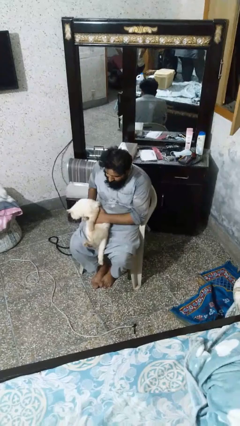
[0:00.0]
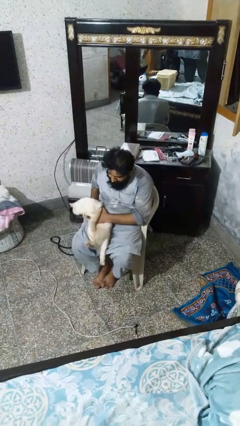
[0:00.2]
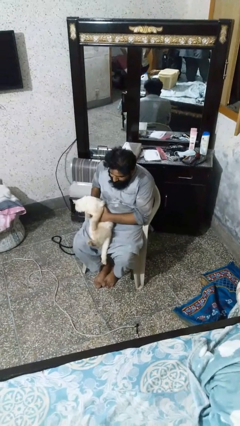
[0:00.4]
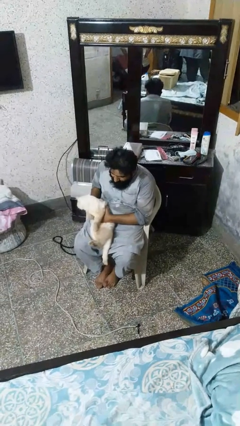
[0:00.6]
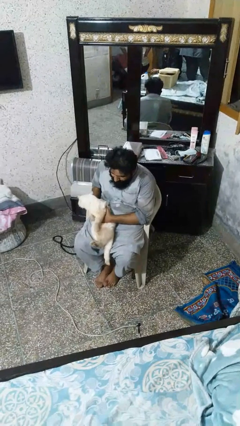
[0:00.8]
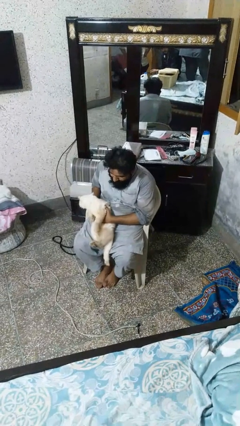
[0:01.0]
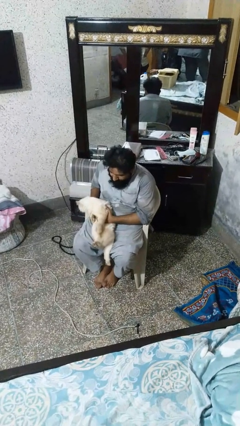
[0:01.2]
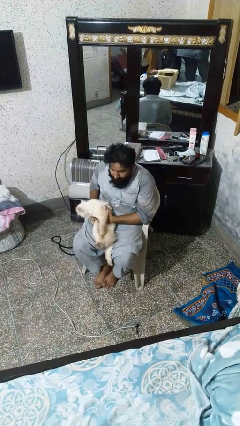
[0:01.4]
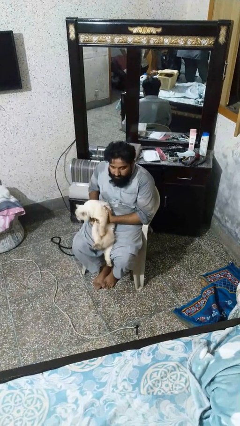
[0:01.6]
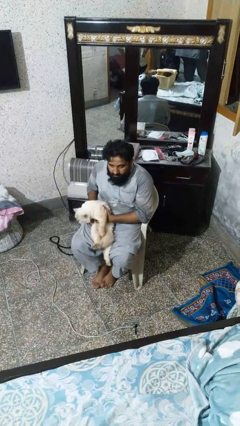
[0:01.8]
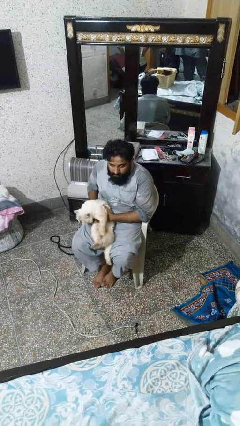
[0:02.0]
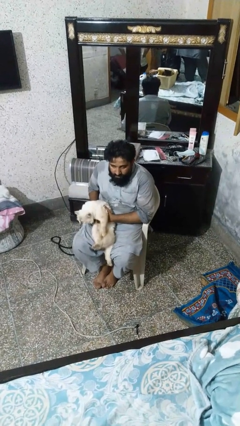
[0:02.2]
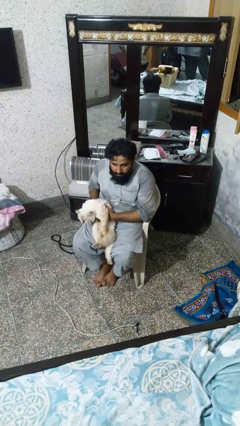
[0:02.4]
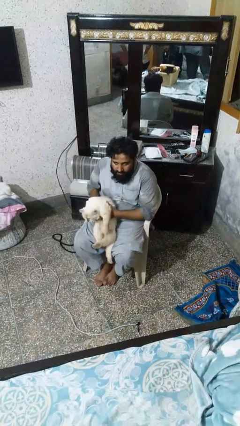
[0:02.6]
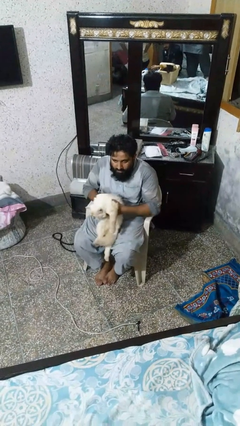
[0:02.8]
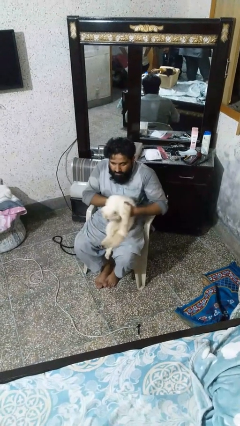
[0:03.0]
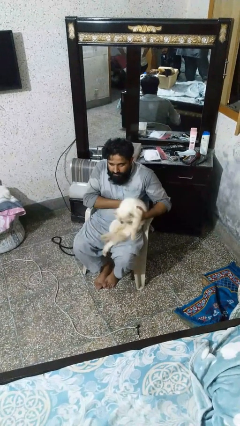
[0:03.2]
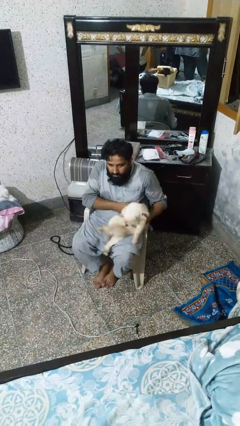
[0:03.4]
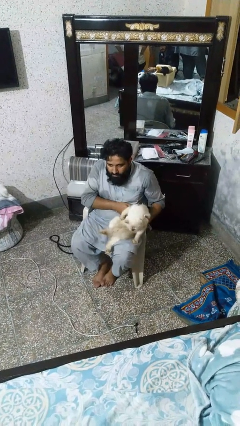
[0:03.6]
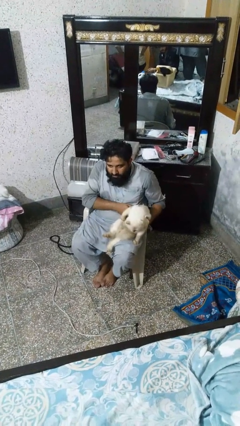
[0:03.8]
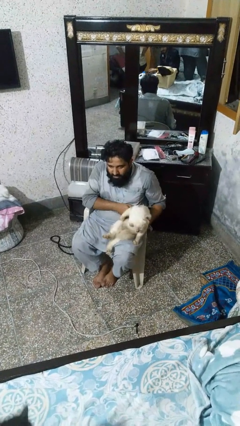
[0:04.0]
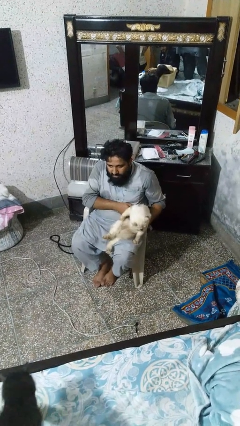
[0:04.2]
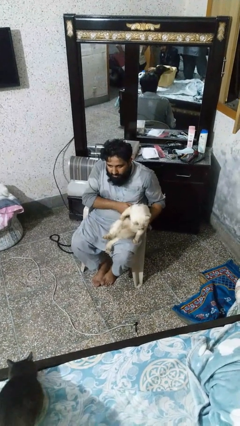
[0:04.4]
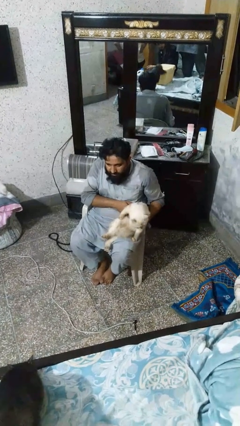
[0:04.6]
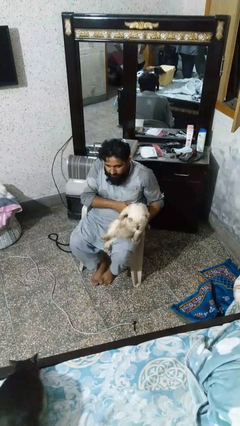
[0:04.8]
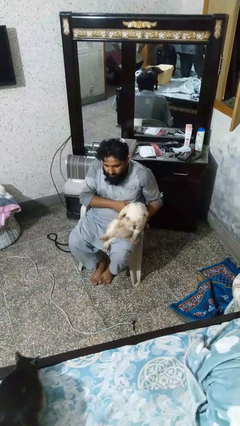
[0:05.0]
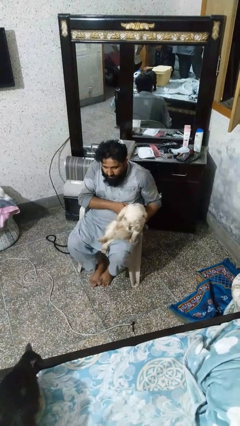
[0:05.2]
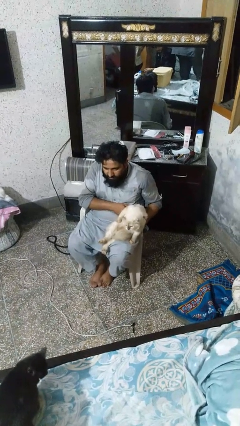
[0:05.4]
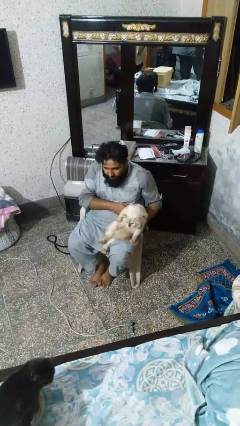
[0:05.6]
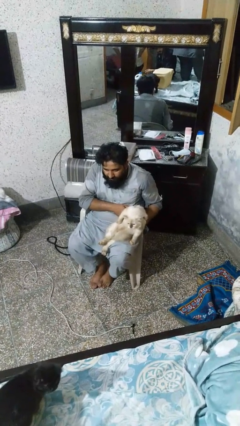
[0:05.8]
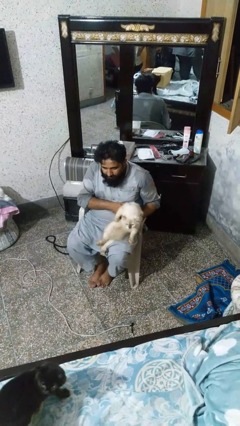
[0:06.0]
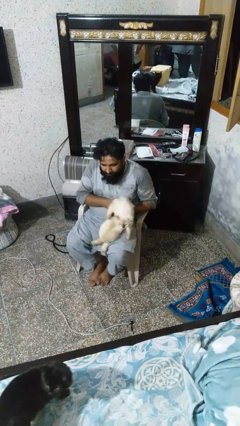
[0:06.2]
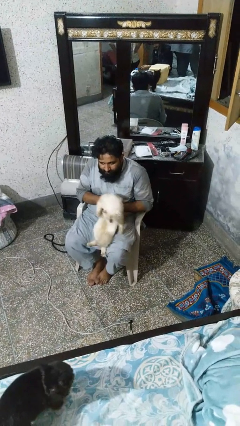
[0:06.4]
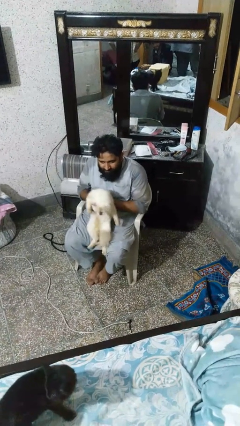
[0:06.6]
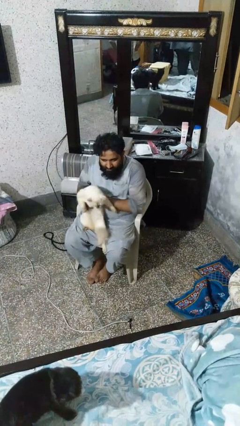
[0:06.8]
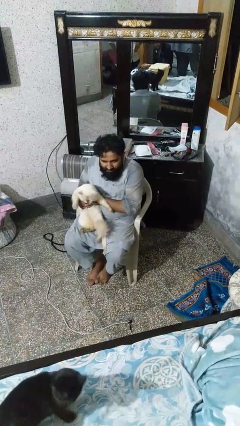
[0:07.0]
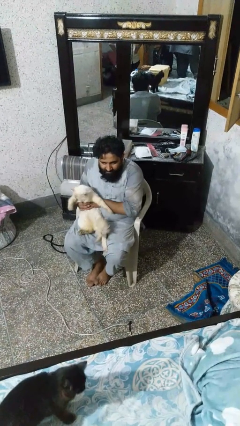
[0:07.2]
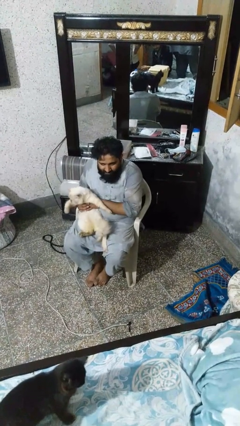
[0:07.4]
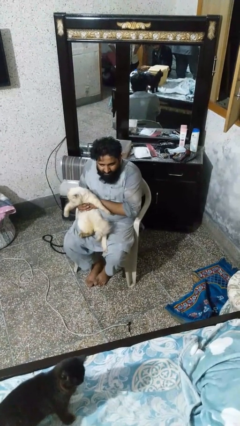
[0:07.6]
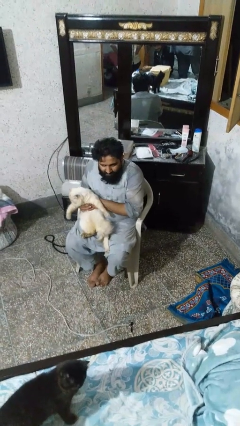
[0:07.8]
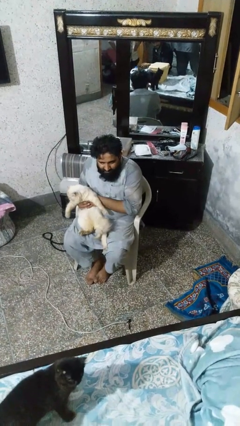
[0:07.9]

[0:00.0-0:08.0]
person pets cat

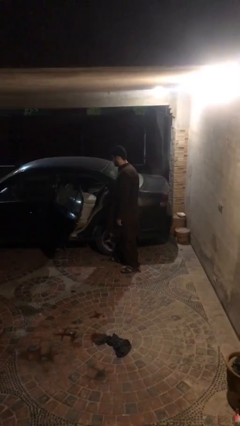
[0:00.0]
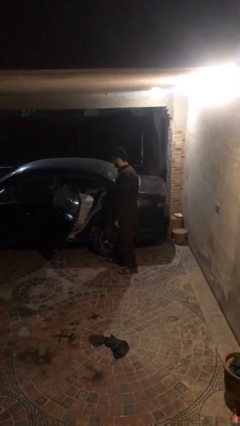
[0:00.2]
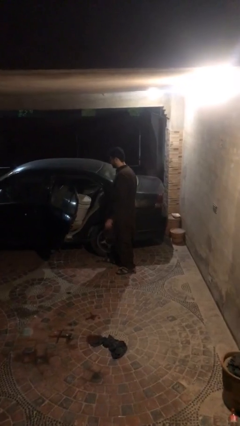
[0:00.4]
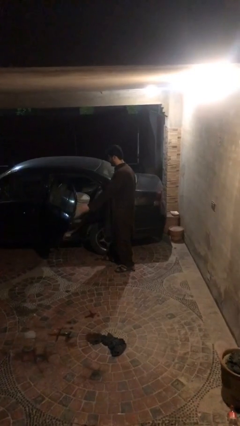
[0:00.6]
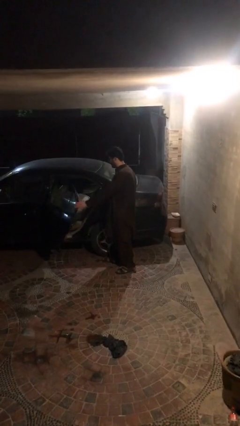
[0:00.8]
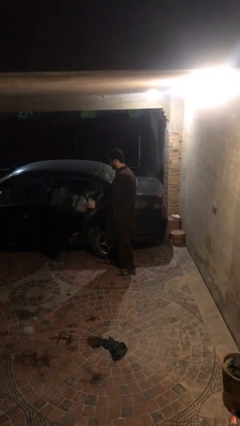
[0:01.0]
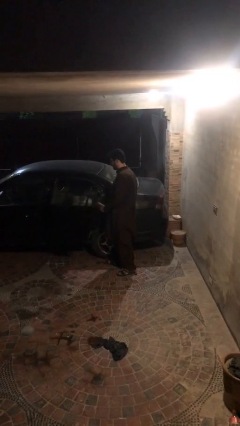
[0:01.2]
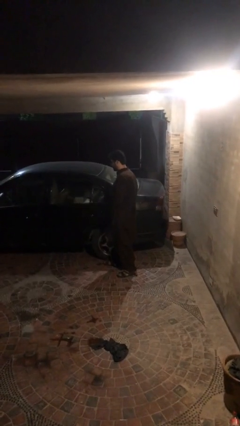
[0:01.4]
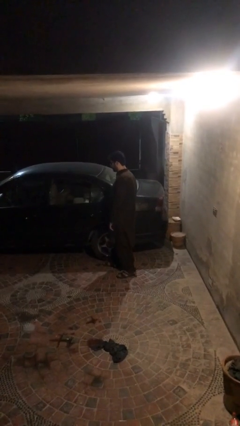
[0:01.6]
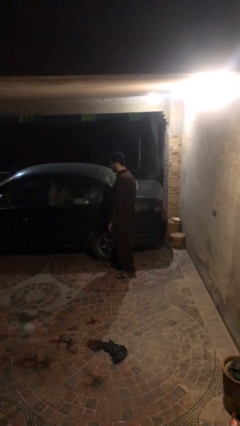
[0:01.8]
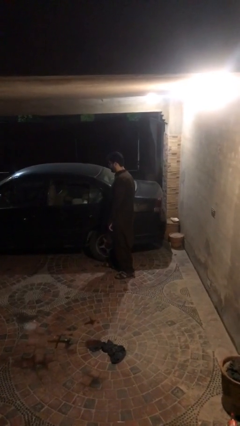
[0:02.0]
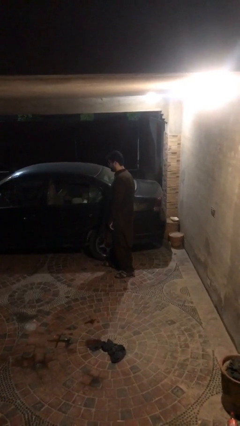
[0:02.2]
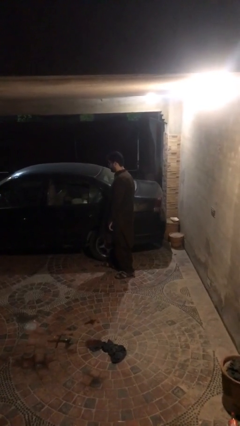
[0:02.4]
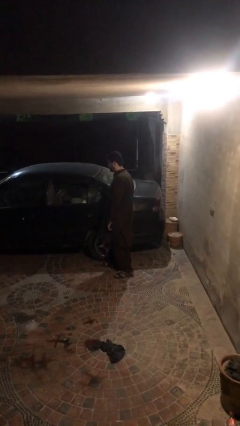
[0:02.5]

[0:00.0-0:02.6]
person closes car door

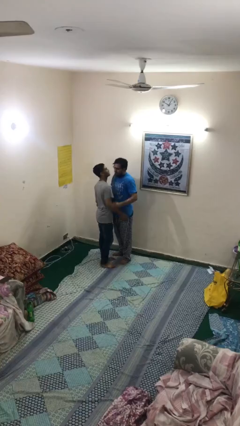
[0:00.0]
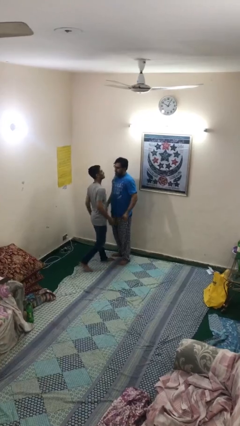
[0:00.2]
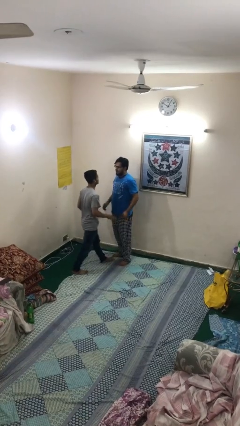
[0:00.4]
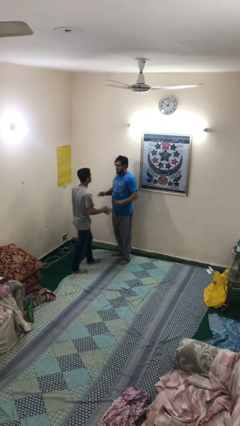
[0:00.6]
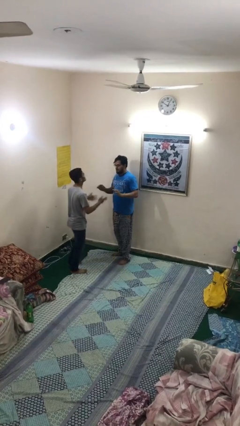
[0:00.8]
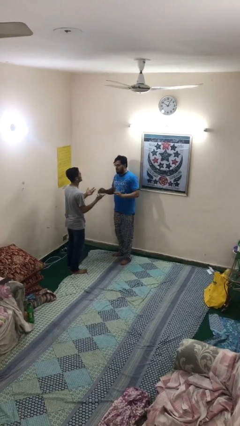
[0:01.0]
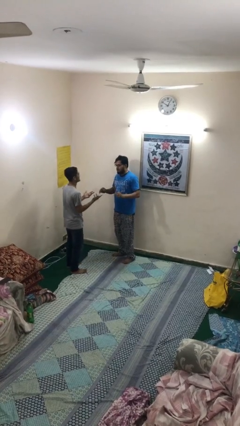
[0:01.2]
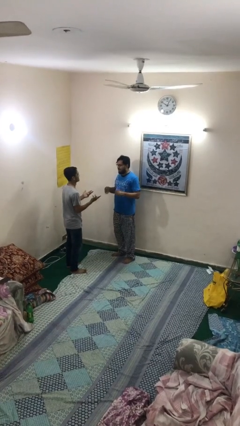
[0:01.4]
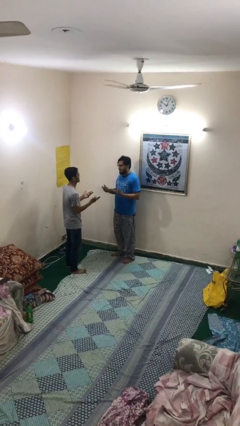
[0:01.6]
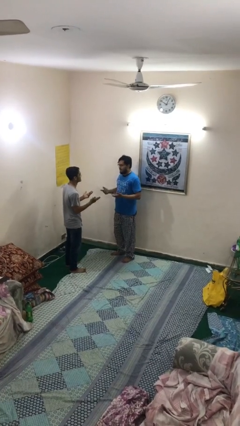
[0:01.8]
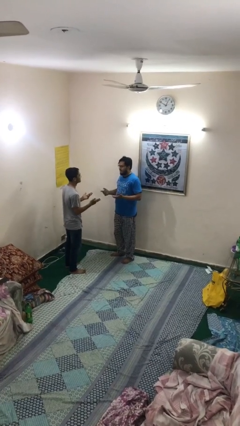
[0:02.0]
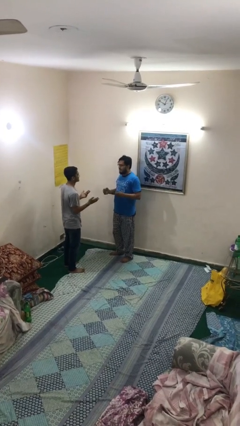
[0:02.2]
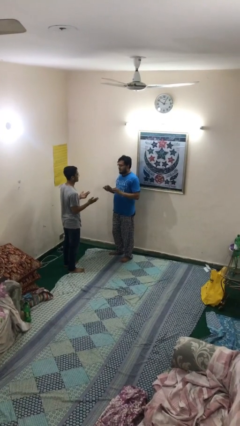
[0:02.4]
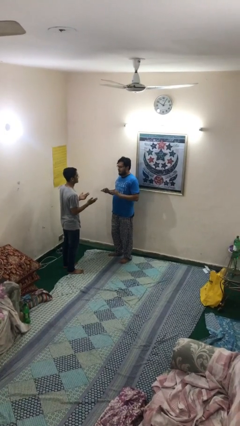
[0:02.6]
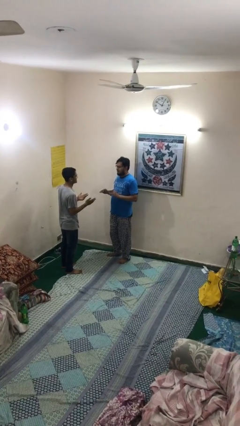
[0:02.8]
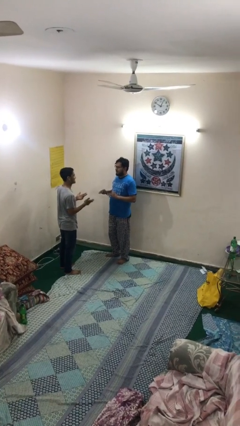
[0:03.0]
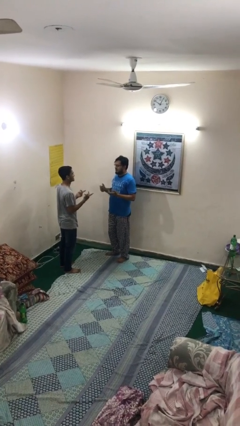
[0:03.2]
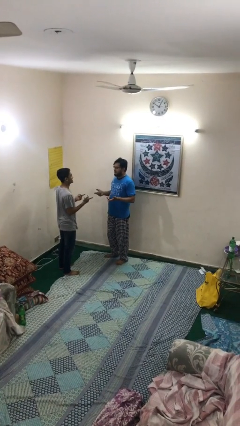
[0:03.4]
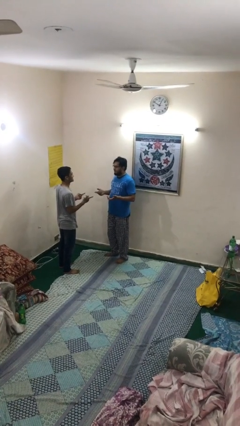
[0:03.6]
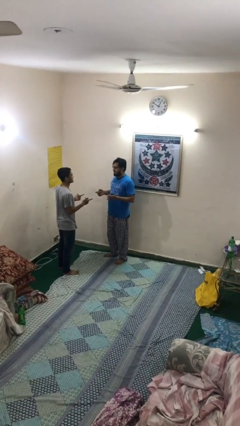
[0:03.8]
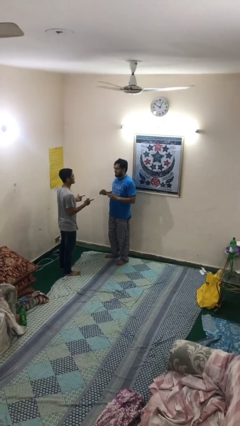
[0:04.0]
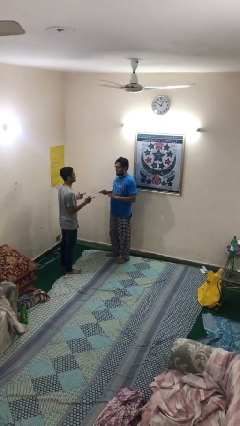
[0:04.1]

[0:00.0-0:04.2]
person talks to person

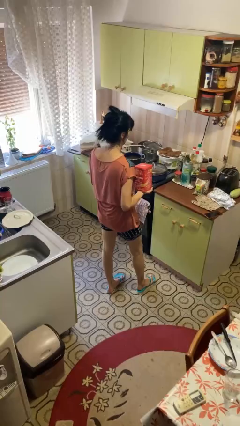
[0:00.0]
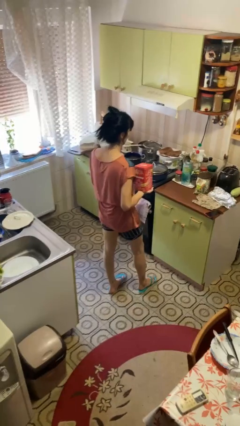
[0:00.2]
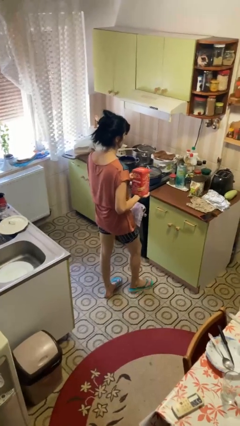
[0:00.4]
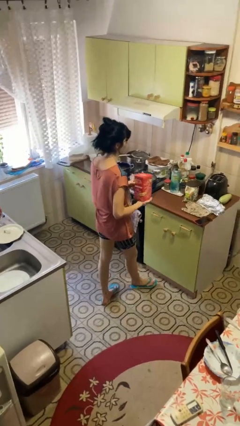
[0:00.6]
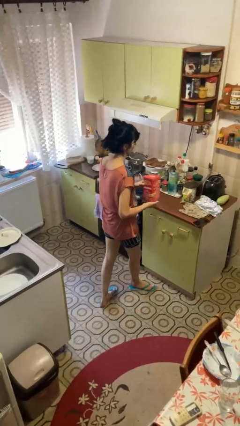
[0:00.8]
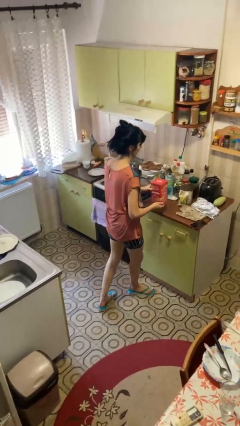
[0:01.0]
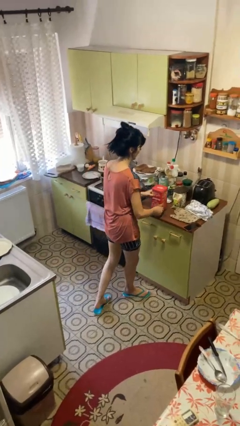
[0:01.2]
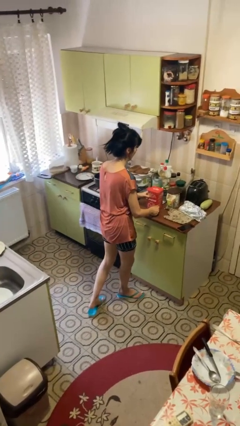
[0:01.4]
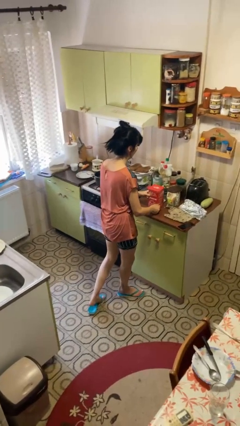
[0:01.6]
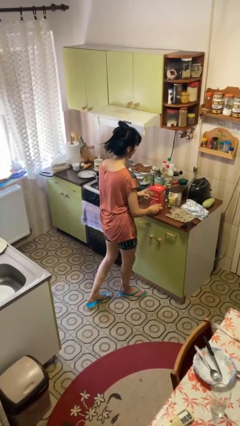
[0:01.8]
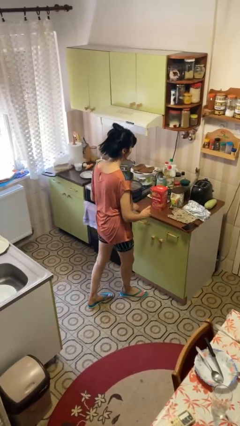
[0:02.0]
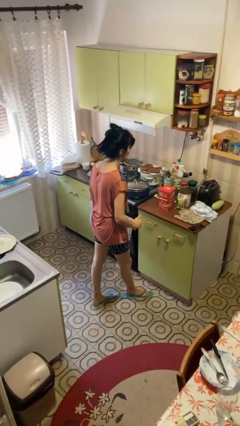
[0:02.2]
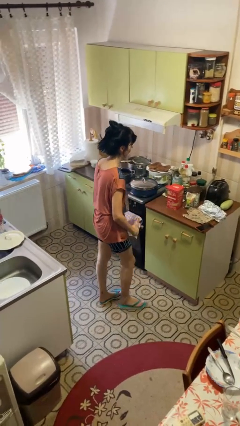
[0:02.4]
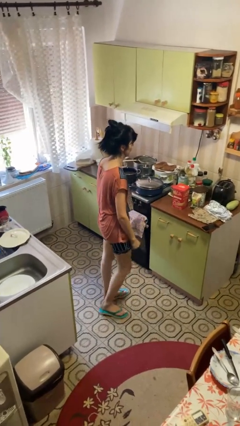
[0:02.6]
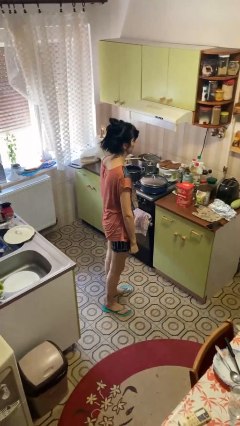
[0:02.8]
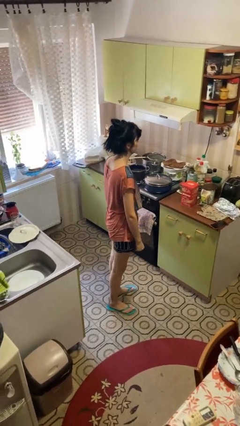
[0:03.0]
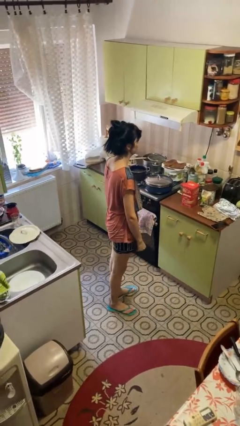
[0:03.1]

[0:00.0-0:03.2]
person puts down object on countertop
